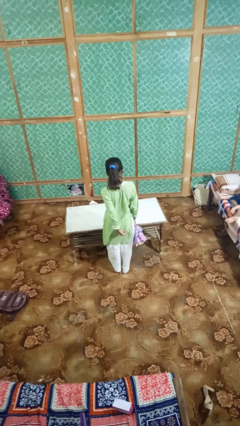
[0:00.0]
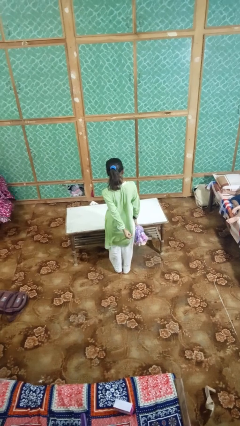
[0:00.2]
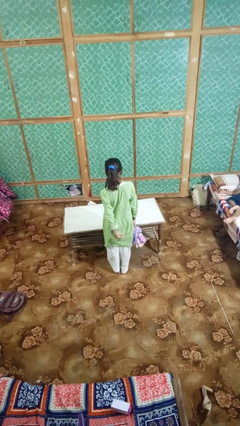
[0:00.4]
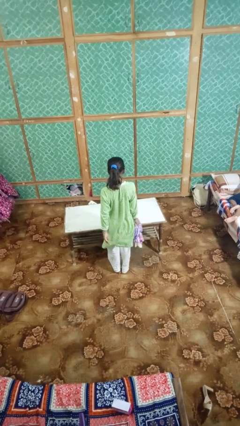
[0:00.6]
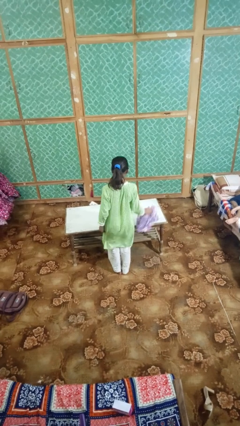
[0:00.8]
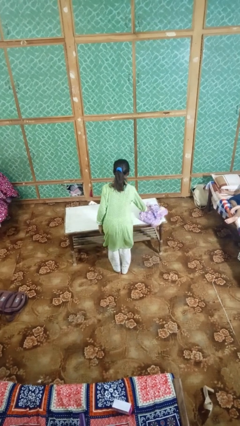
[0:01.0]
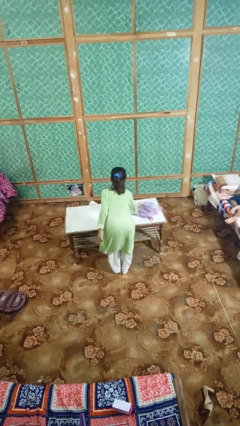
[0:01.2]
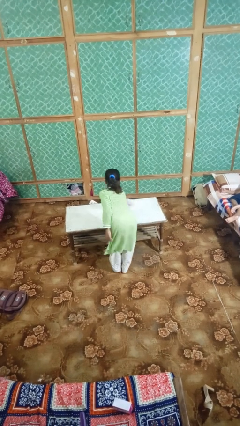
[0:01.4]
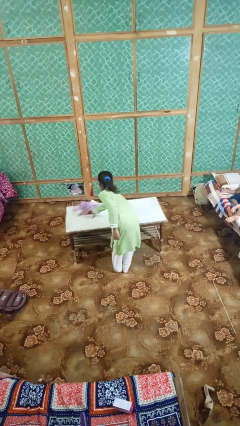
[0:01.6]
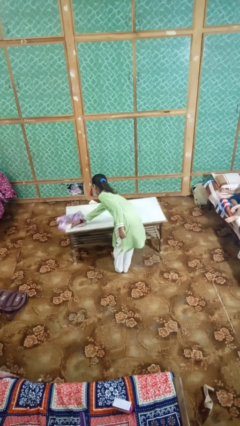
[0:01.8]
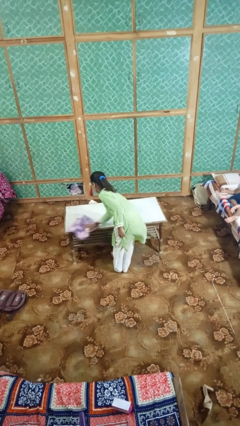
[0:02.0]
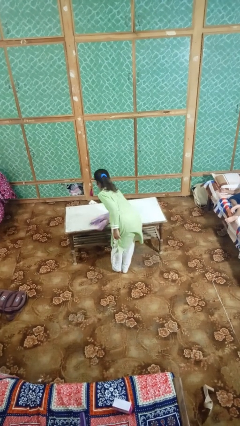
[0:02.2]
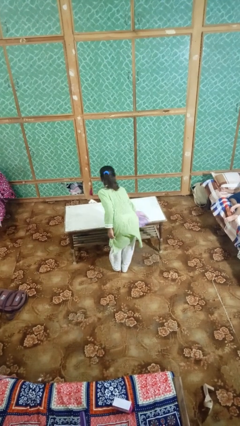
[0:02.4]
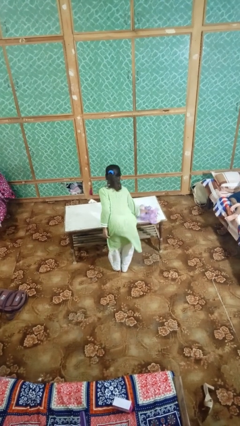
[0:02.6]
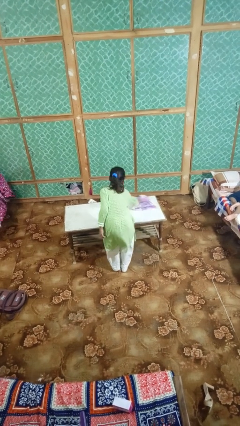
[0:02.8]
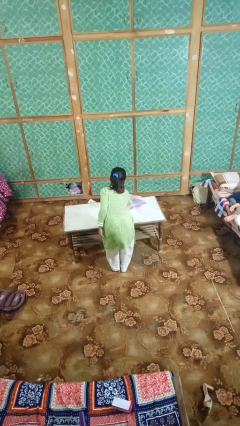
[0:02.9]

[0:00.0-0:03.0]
person cleans table with rag

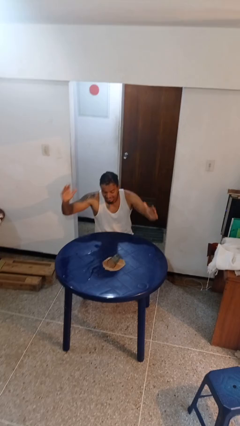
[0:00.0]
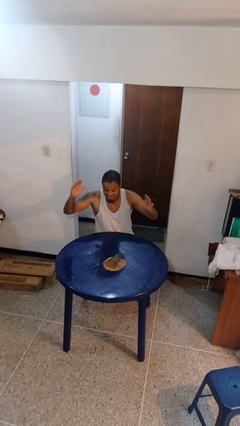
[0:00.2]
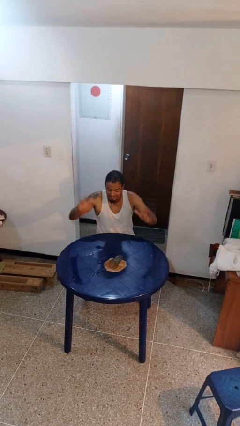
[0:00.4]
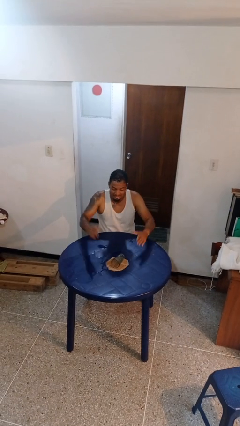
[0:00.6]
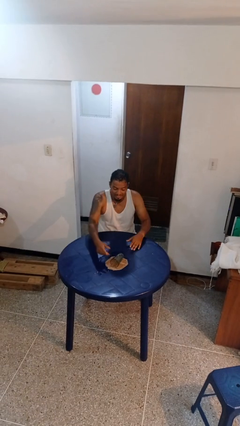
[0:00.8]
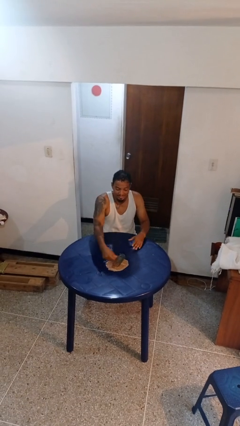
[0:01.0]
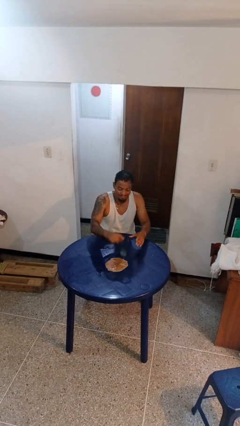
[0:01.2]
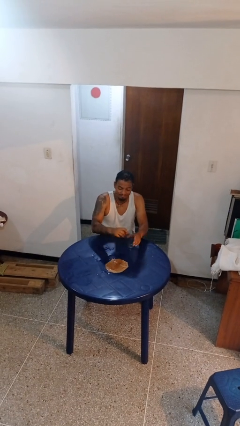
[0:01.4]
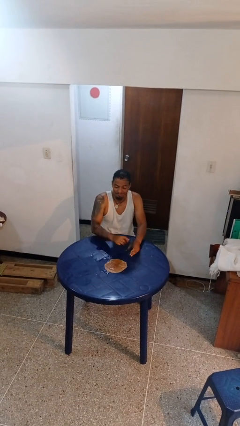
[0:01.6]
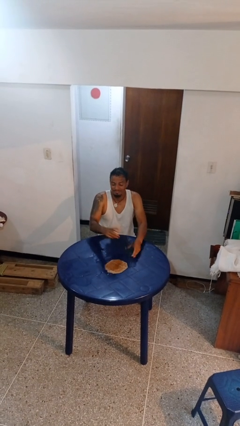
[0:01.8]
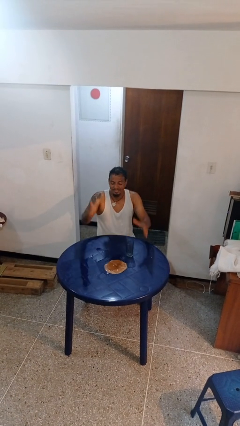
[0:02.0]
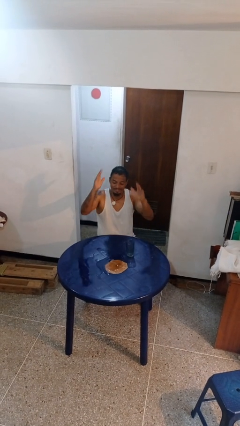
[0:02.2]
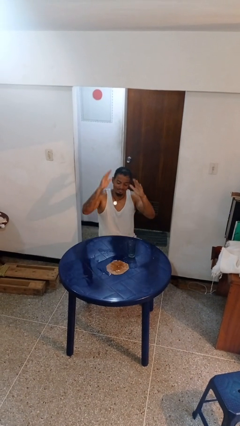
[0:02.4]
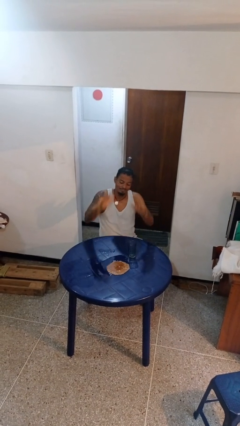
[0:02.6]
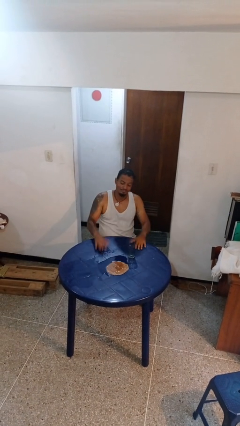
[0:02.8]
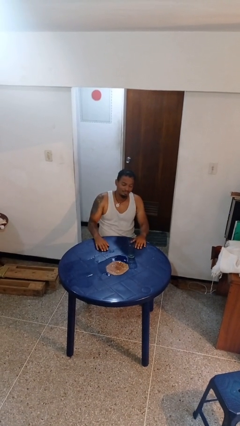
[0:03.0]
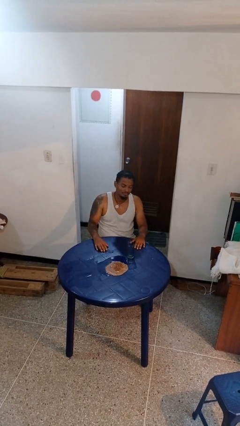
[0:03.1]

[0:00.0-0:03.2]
person sets upright glass

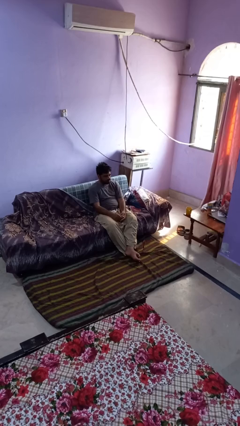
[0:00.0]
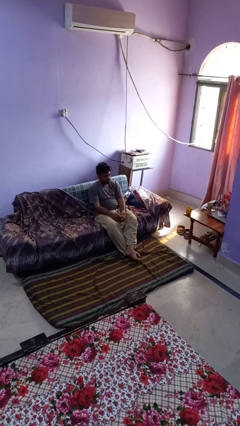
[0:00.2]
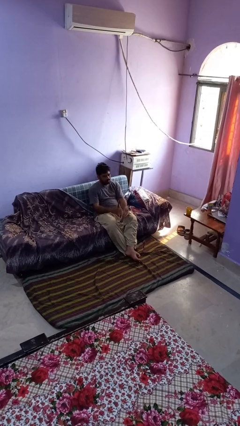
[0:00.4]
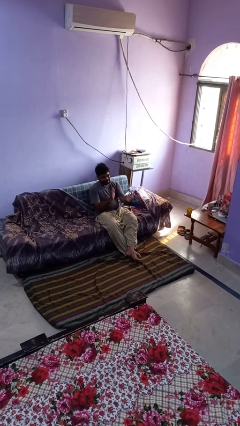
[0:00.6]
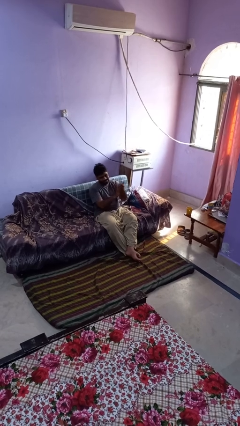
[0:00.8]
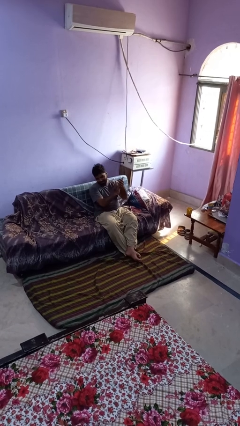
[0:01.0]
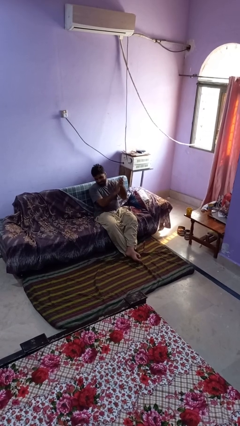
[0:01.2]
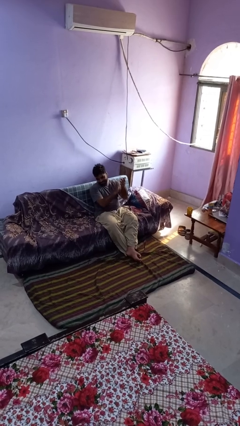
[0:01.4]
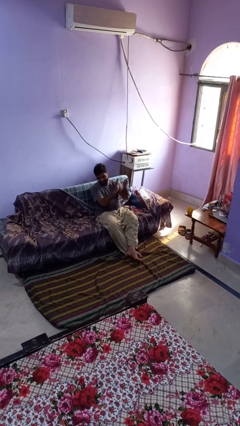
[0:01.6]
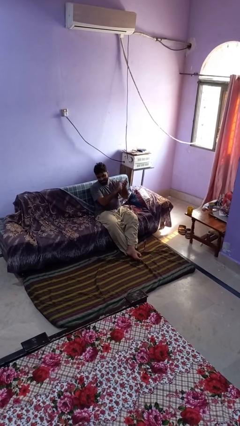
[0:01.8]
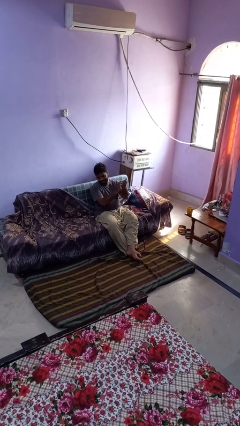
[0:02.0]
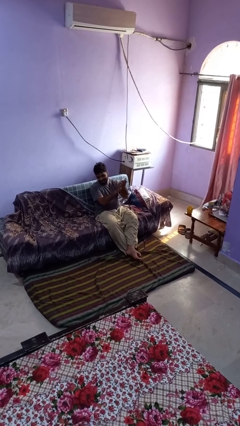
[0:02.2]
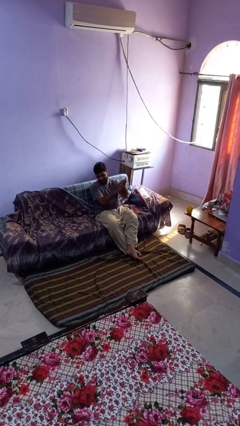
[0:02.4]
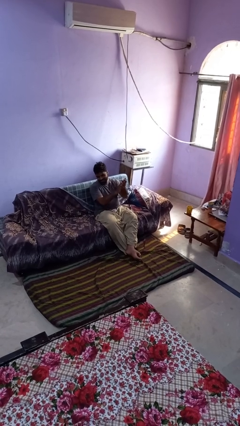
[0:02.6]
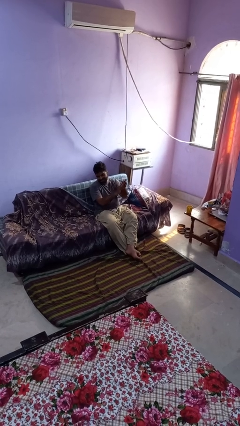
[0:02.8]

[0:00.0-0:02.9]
person claps hands

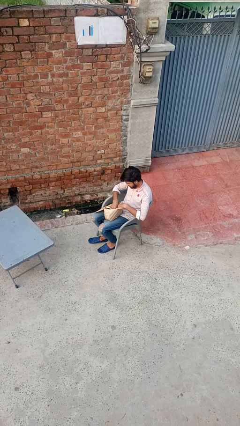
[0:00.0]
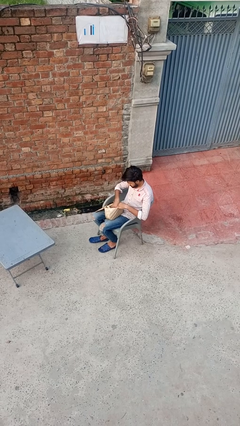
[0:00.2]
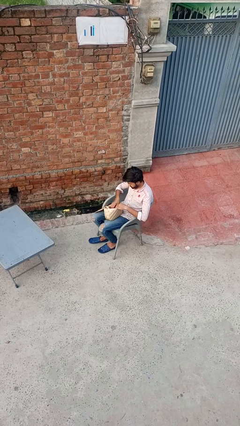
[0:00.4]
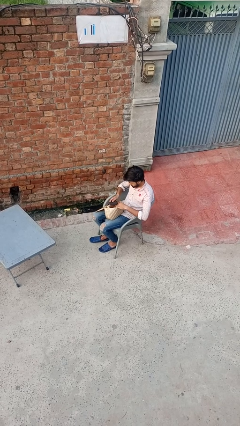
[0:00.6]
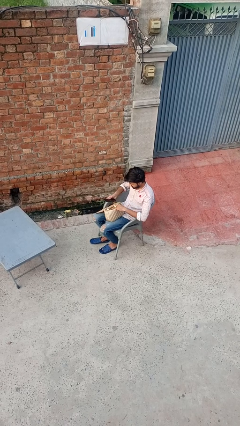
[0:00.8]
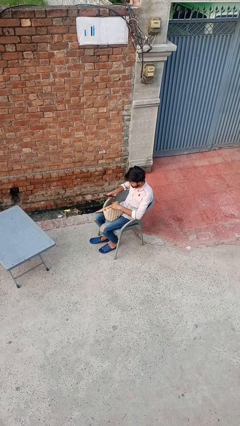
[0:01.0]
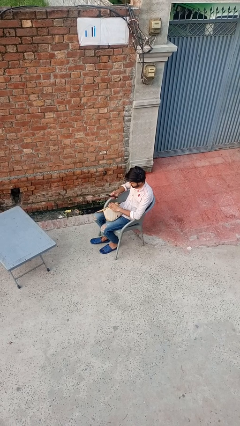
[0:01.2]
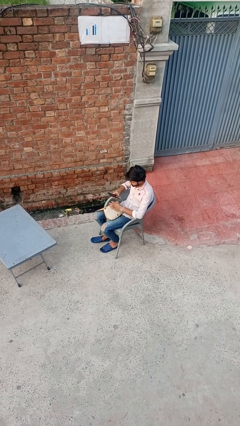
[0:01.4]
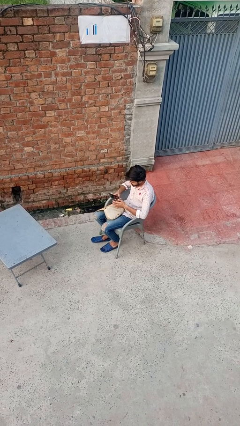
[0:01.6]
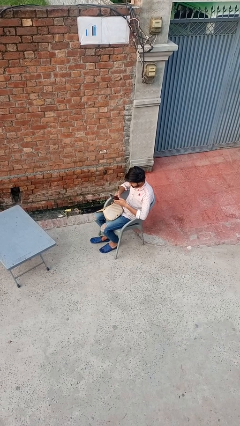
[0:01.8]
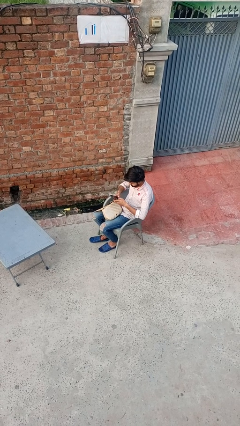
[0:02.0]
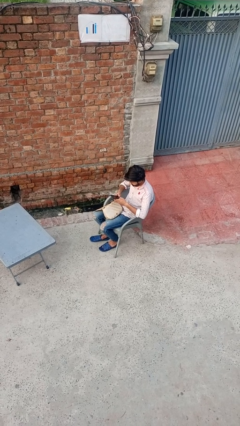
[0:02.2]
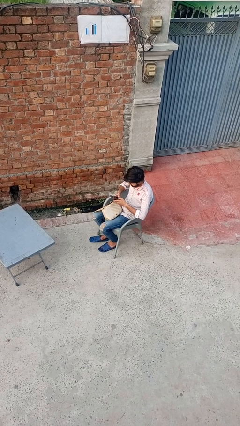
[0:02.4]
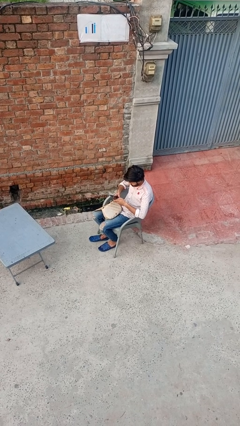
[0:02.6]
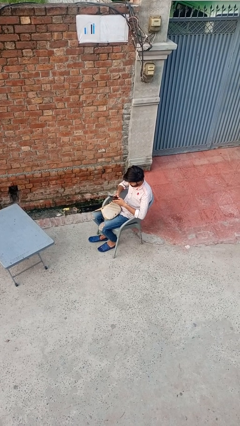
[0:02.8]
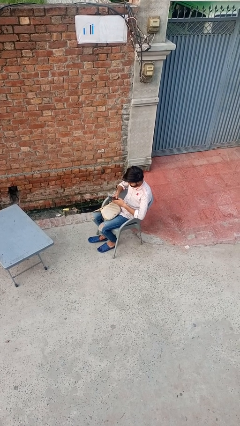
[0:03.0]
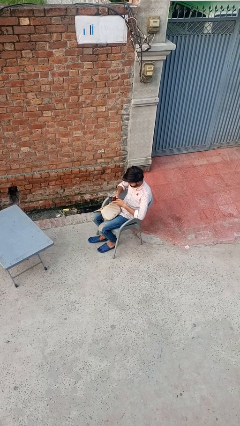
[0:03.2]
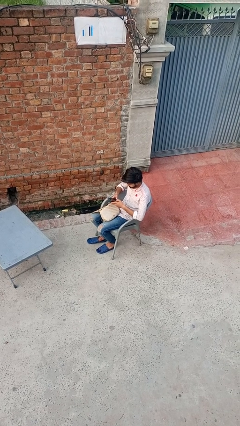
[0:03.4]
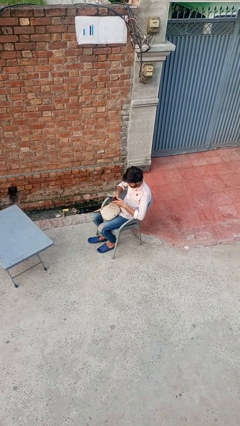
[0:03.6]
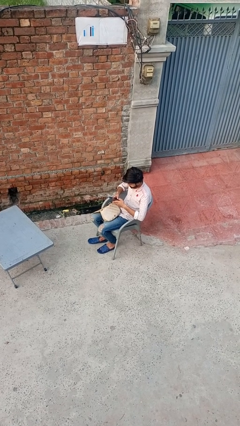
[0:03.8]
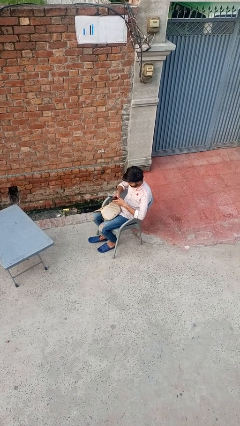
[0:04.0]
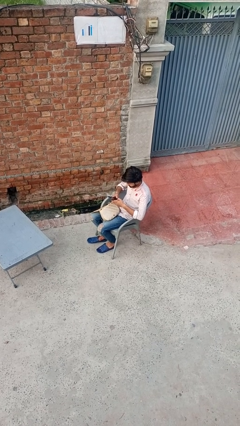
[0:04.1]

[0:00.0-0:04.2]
person takes object from purse

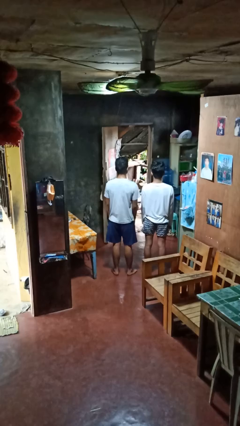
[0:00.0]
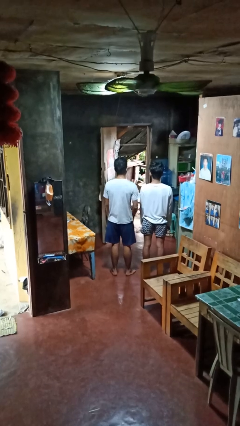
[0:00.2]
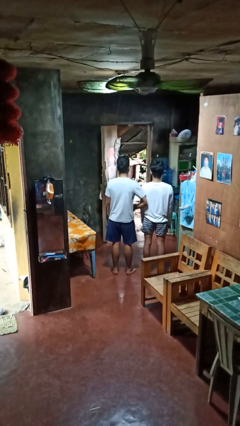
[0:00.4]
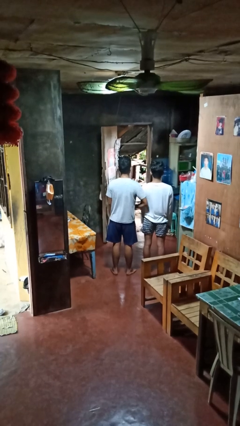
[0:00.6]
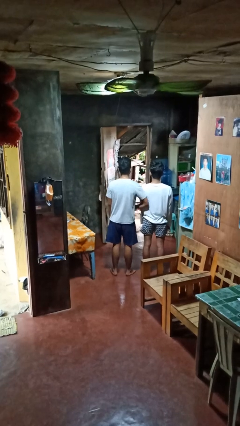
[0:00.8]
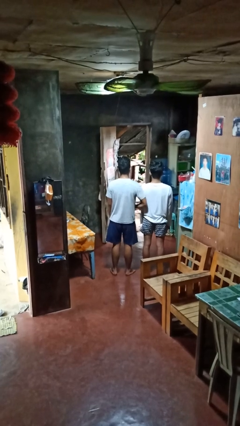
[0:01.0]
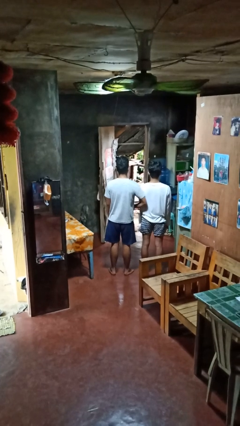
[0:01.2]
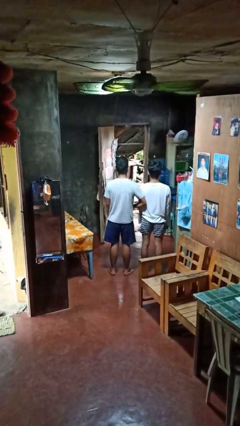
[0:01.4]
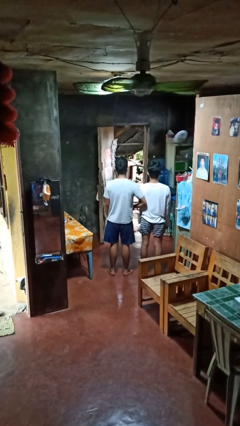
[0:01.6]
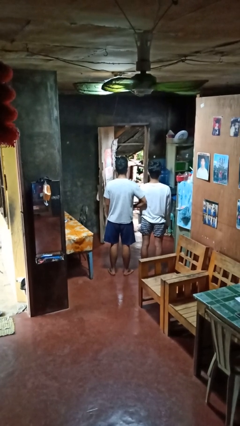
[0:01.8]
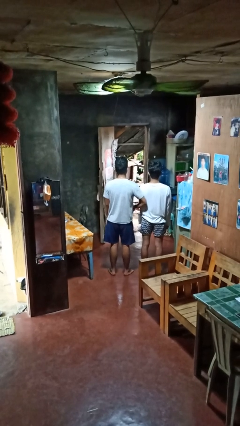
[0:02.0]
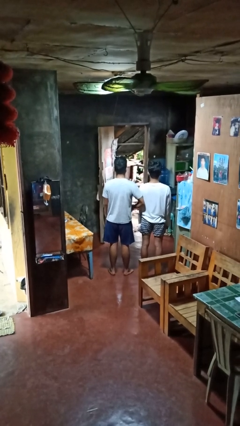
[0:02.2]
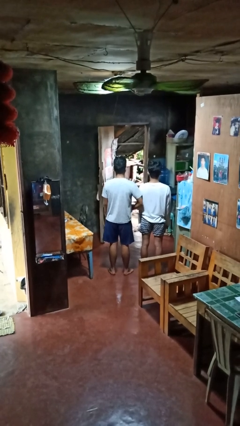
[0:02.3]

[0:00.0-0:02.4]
person nudges person with elbow

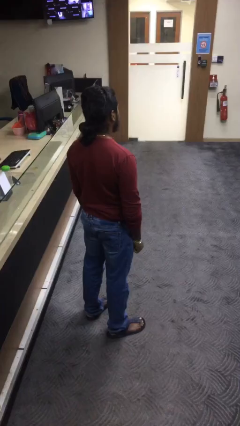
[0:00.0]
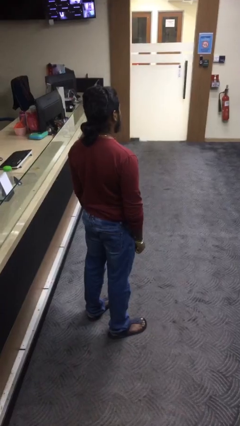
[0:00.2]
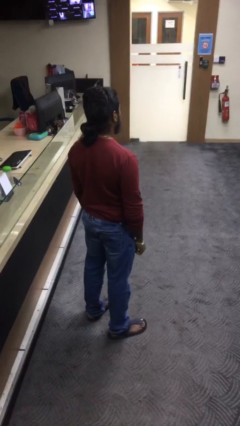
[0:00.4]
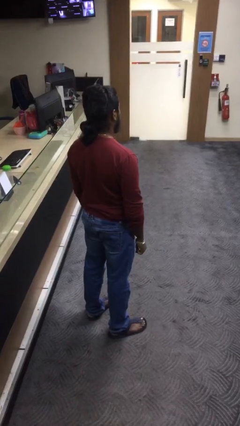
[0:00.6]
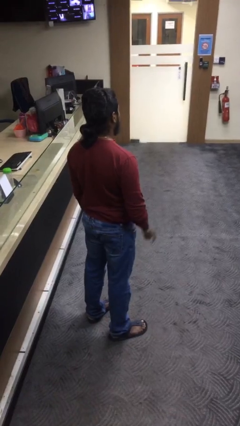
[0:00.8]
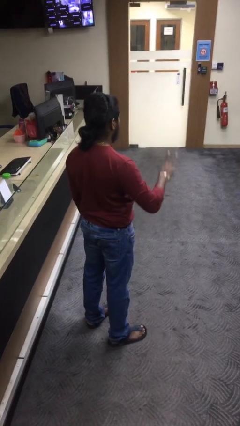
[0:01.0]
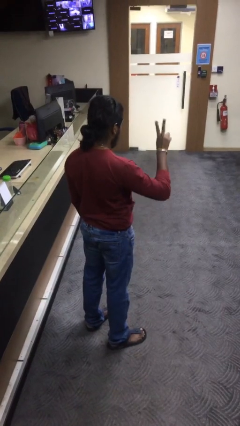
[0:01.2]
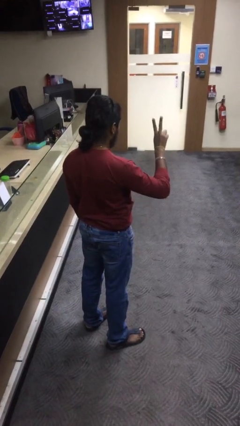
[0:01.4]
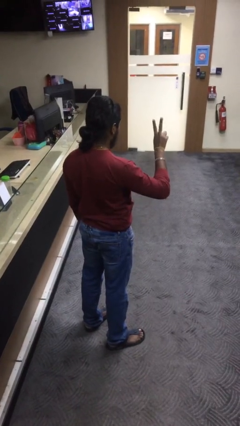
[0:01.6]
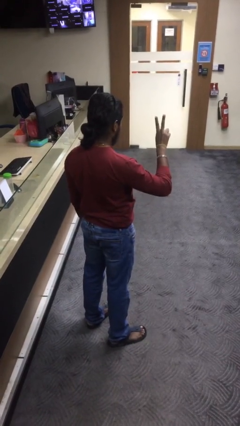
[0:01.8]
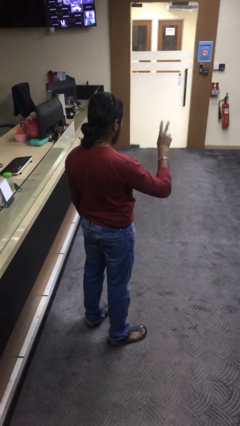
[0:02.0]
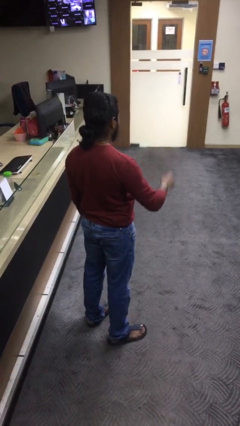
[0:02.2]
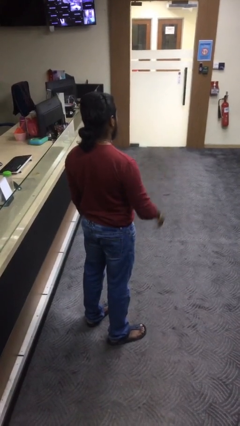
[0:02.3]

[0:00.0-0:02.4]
person gestures peace
